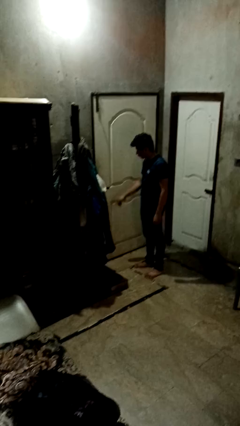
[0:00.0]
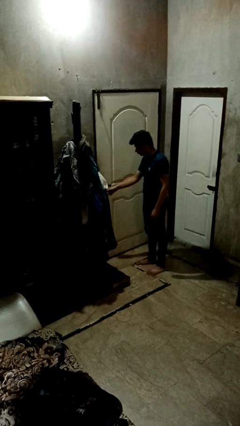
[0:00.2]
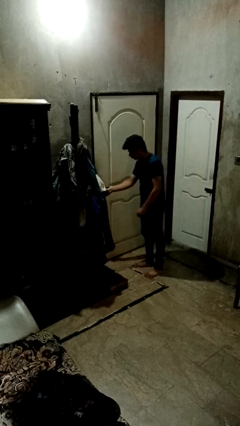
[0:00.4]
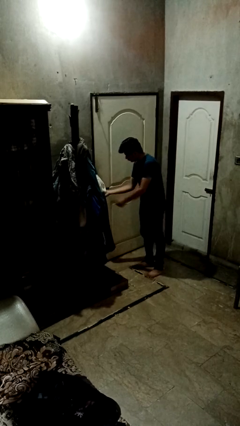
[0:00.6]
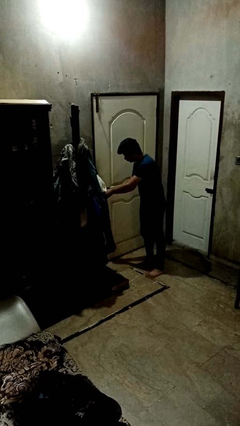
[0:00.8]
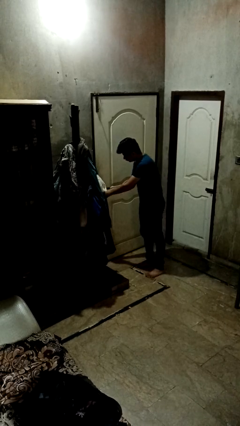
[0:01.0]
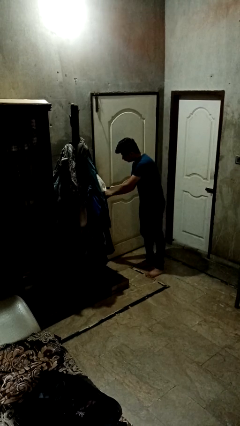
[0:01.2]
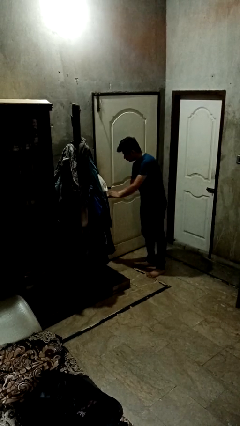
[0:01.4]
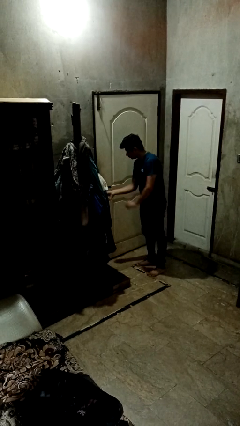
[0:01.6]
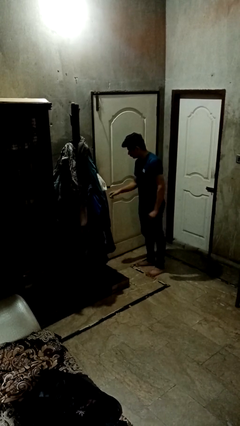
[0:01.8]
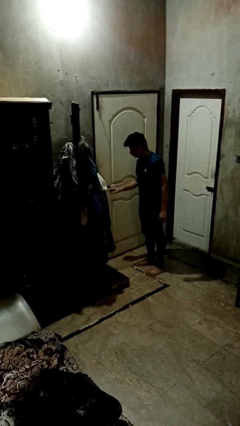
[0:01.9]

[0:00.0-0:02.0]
person unlocks door with keys

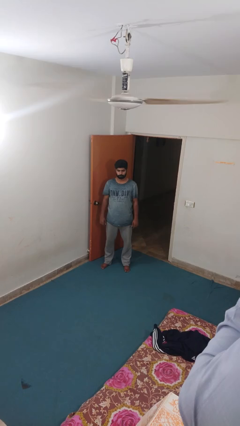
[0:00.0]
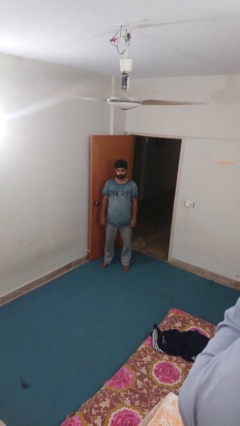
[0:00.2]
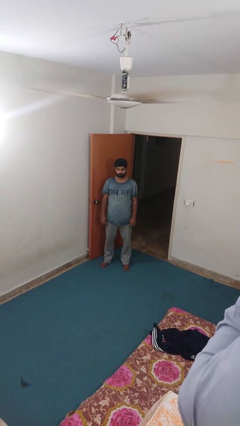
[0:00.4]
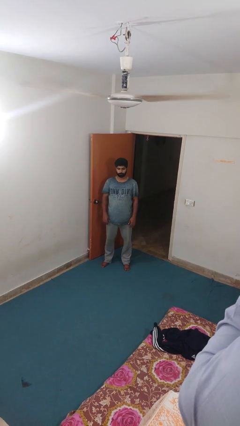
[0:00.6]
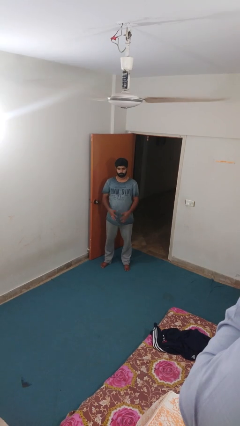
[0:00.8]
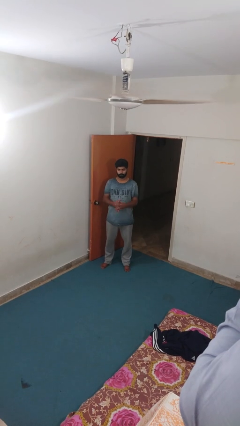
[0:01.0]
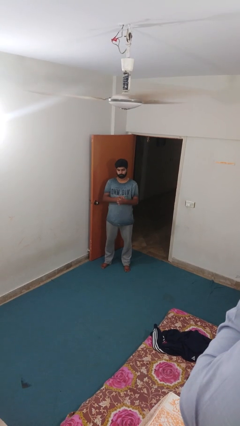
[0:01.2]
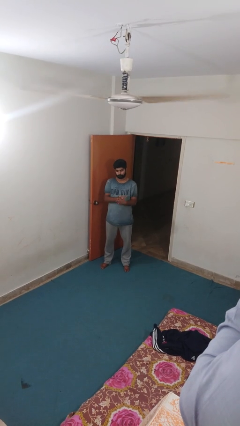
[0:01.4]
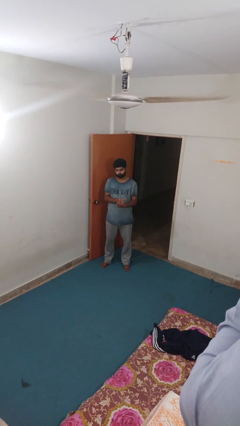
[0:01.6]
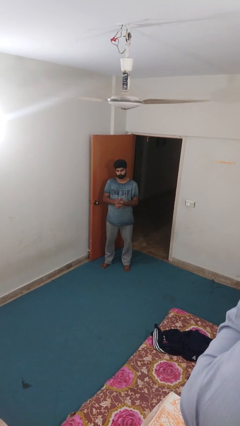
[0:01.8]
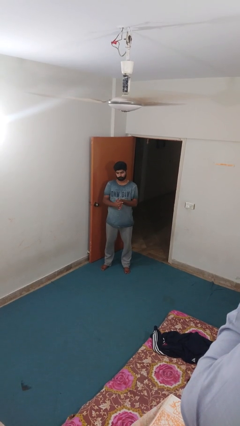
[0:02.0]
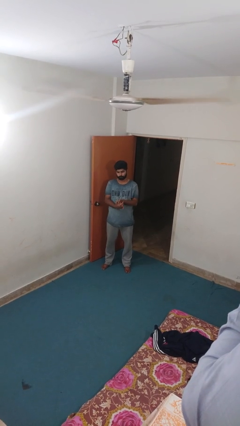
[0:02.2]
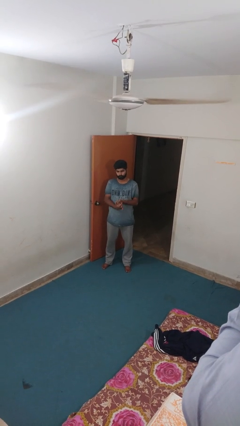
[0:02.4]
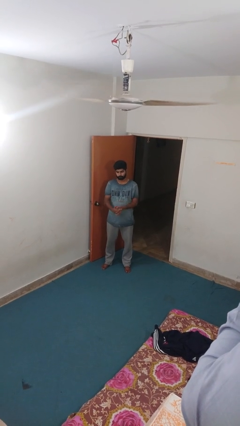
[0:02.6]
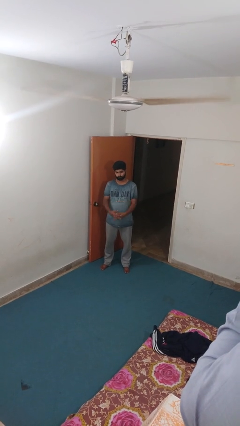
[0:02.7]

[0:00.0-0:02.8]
person snaps fingers

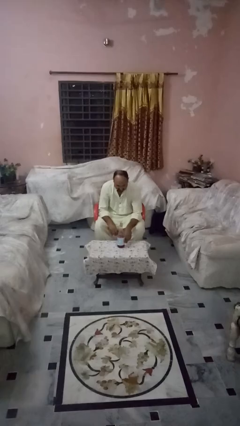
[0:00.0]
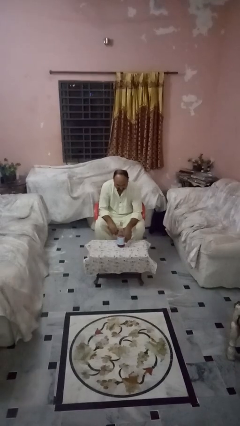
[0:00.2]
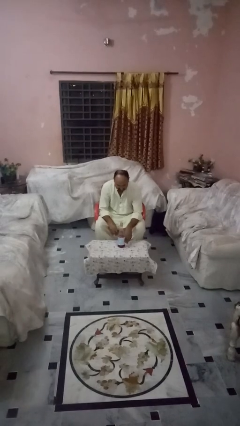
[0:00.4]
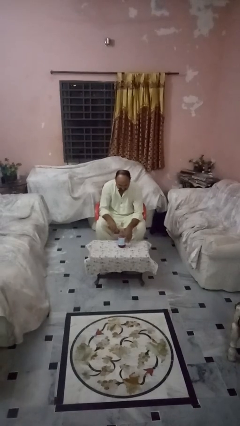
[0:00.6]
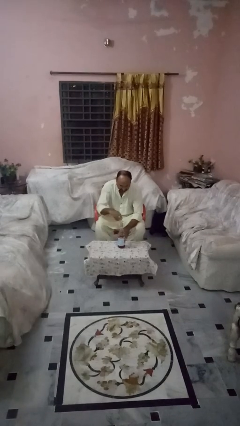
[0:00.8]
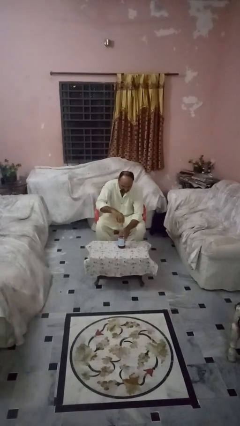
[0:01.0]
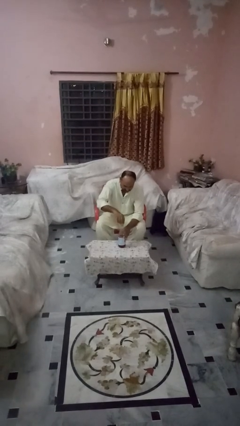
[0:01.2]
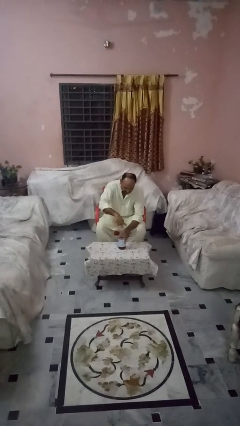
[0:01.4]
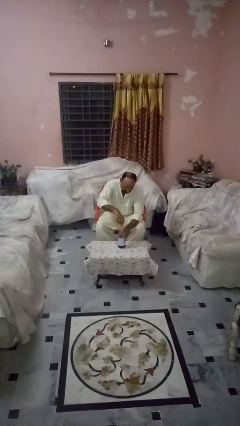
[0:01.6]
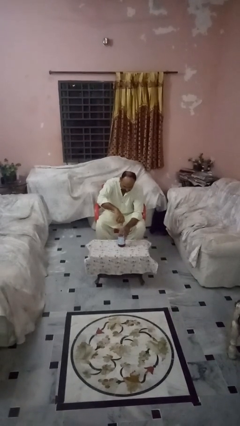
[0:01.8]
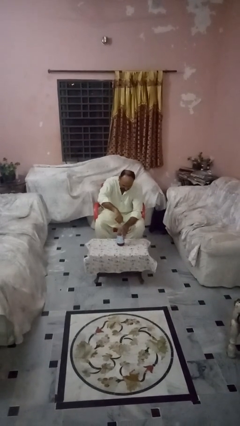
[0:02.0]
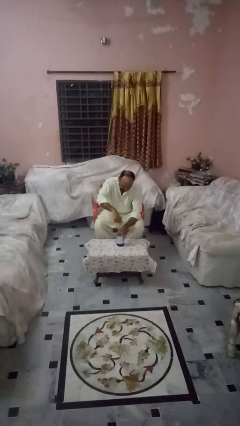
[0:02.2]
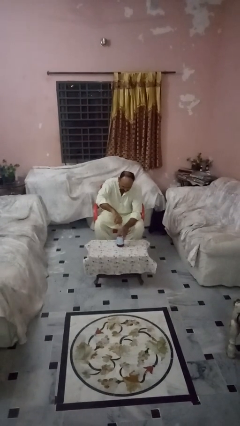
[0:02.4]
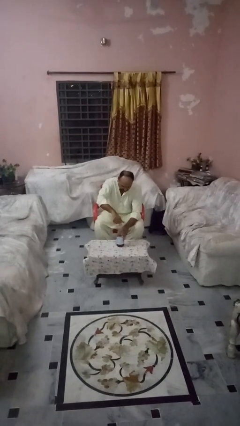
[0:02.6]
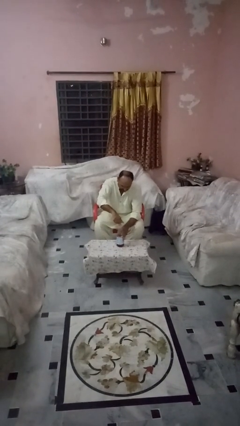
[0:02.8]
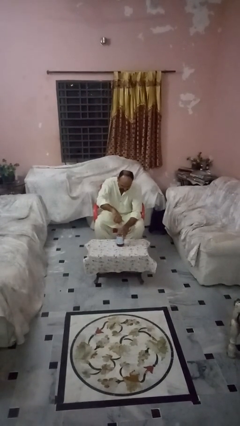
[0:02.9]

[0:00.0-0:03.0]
person screws lid to bottle

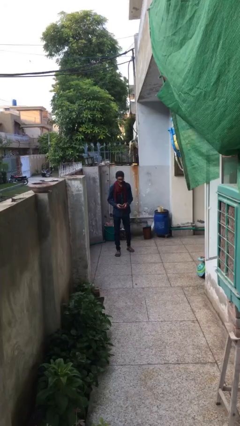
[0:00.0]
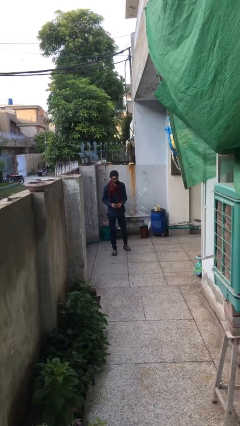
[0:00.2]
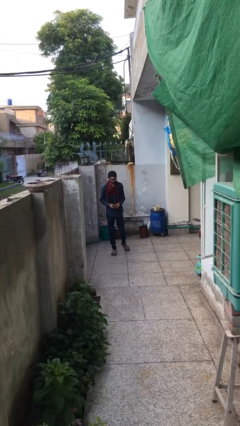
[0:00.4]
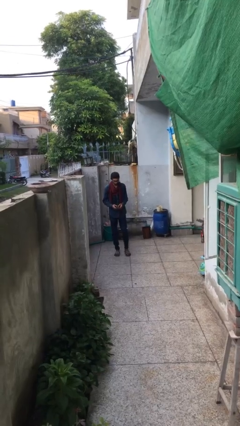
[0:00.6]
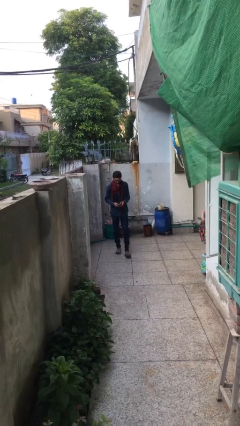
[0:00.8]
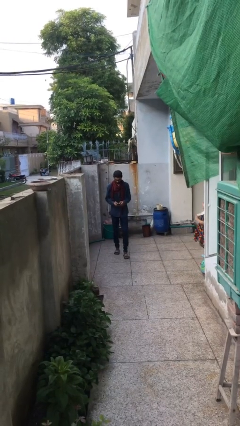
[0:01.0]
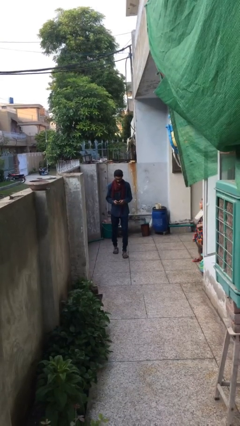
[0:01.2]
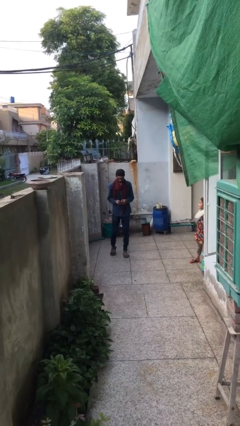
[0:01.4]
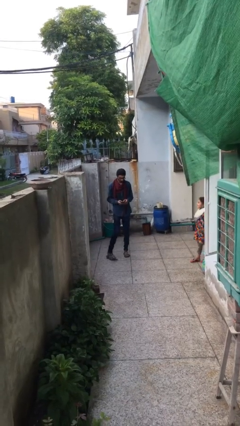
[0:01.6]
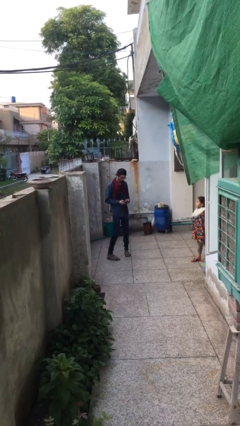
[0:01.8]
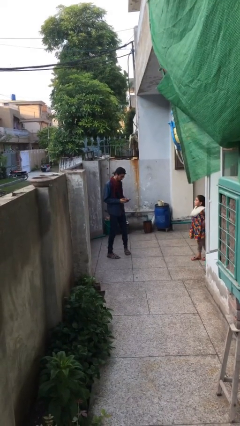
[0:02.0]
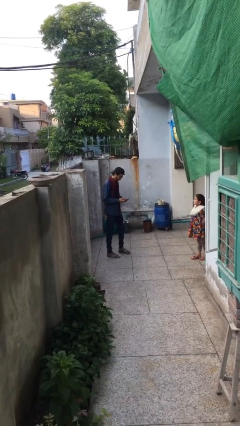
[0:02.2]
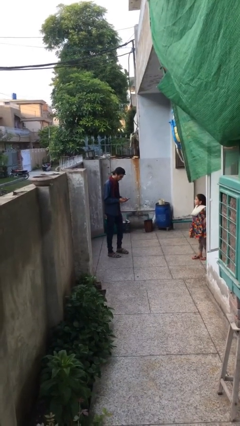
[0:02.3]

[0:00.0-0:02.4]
person texts on phone

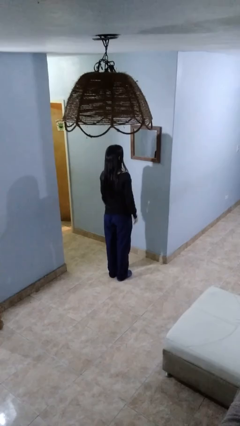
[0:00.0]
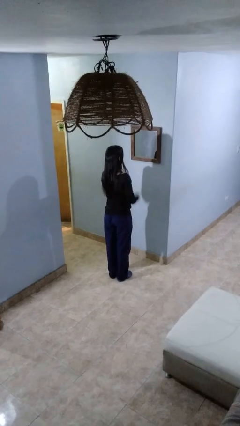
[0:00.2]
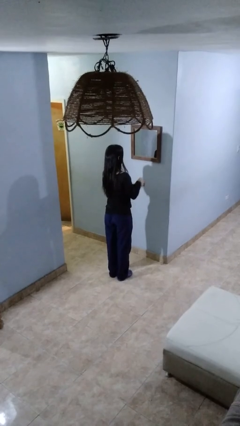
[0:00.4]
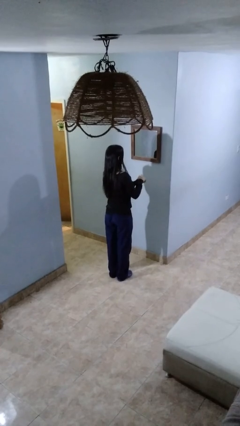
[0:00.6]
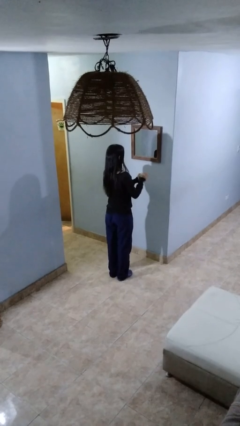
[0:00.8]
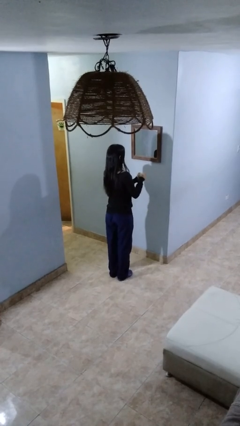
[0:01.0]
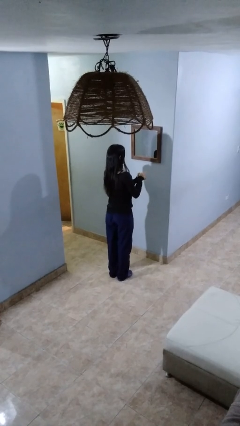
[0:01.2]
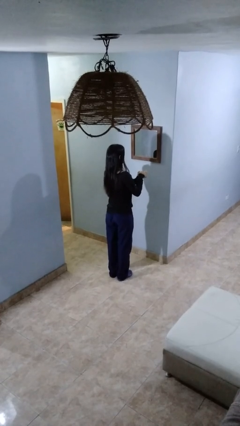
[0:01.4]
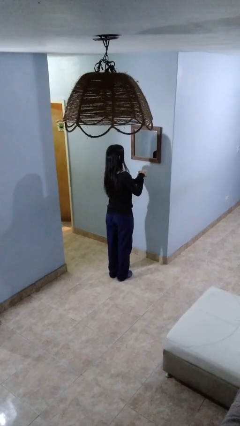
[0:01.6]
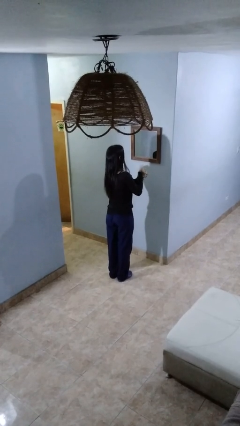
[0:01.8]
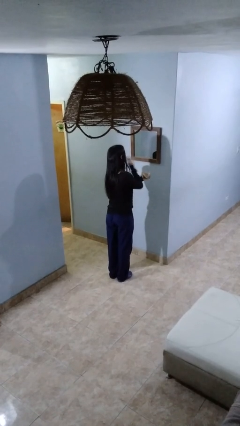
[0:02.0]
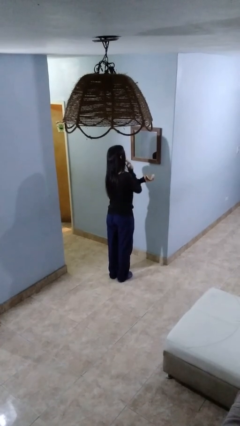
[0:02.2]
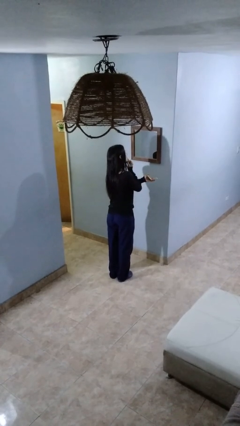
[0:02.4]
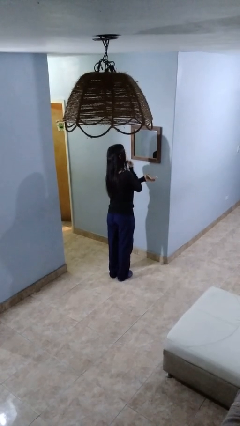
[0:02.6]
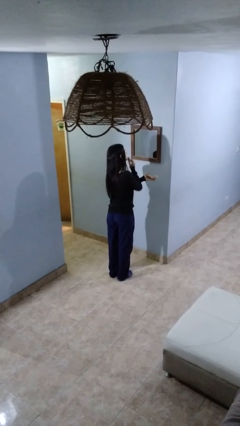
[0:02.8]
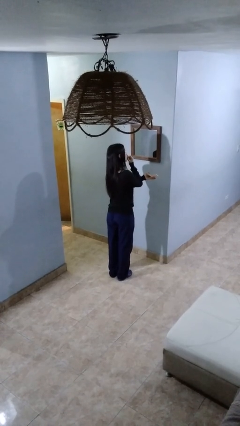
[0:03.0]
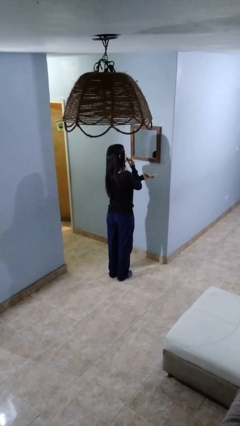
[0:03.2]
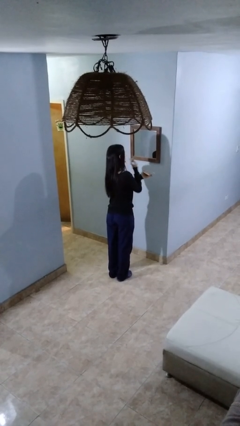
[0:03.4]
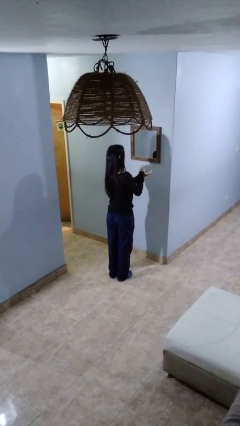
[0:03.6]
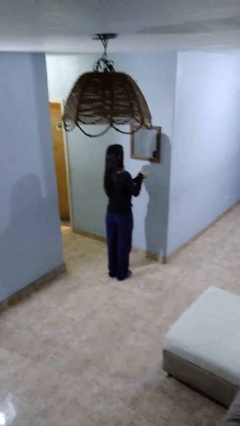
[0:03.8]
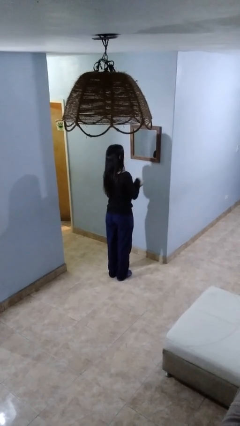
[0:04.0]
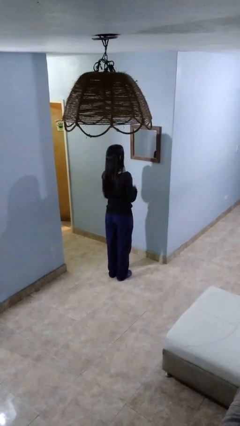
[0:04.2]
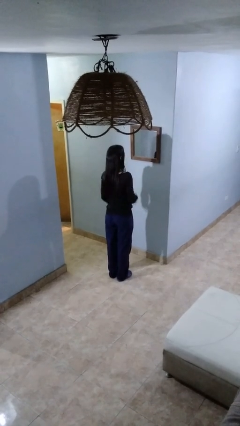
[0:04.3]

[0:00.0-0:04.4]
person applies foundation makeup

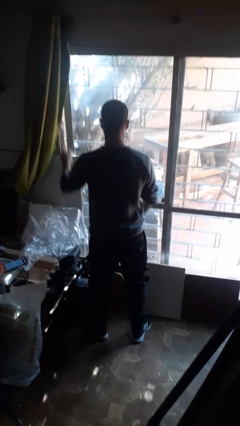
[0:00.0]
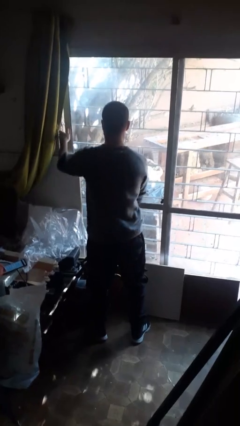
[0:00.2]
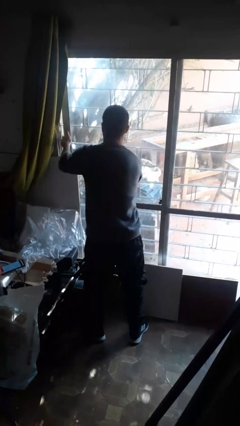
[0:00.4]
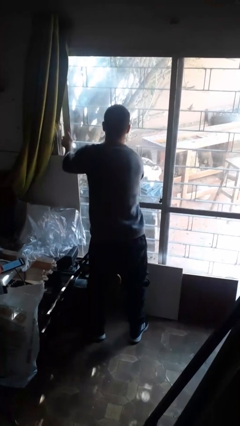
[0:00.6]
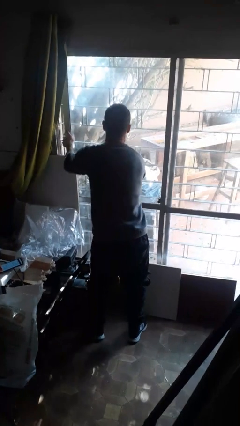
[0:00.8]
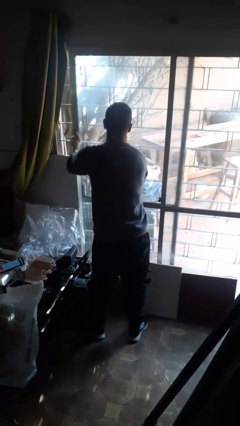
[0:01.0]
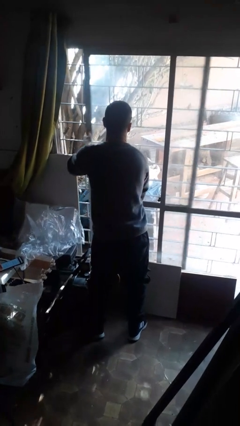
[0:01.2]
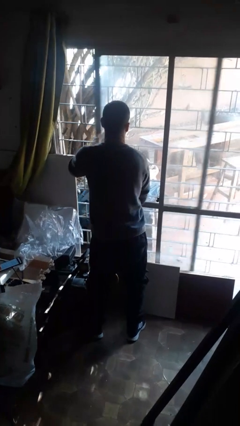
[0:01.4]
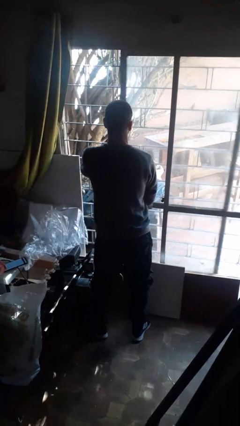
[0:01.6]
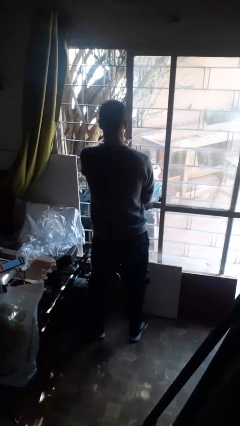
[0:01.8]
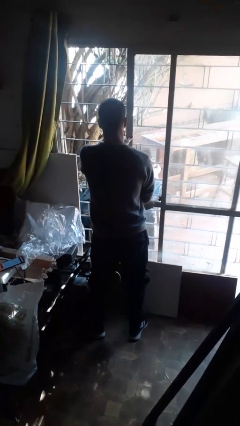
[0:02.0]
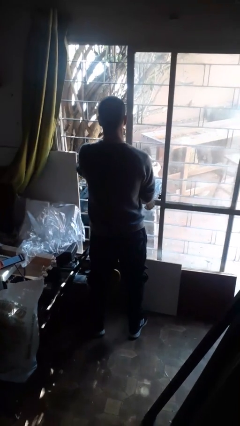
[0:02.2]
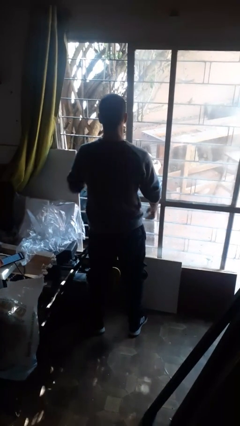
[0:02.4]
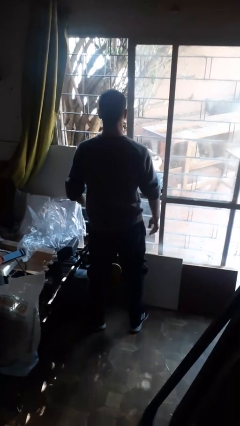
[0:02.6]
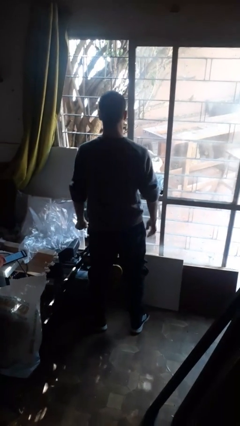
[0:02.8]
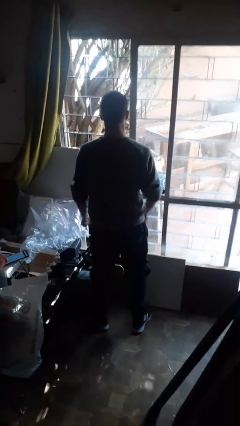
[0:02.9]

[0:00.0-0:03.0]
person opens sliding door
